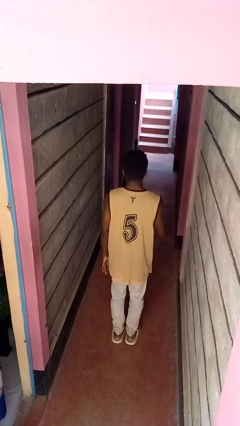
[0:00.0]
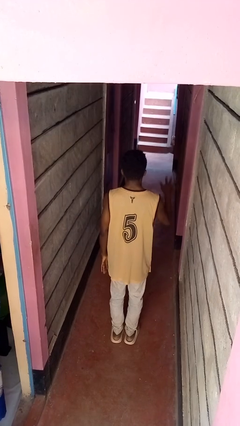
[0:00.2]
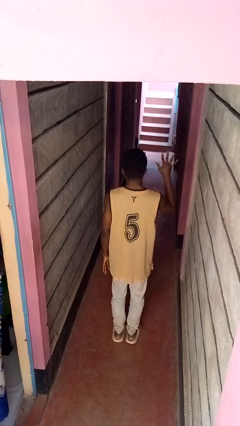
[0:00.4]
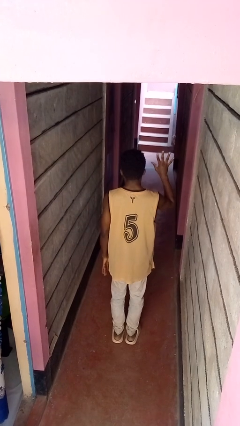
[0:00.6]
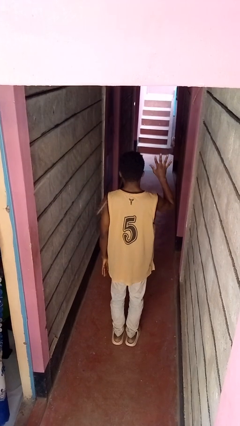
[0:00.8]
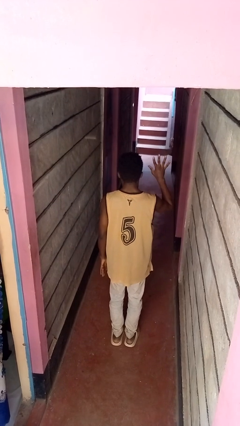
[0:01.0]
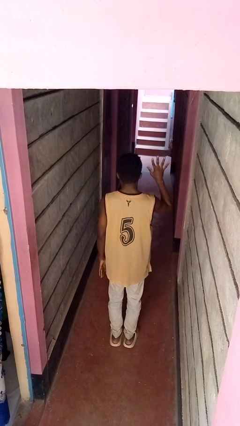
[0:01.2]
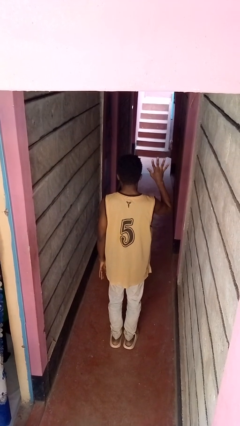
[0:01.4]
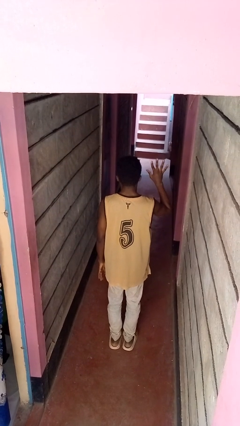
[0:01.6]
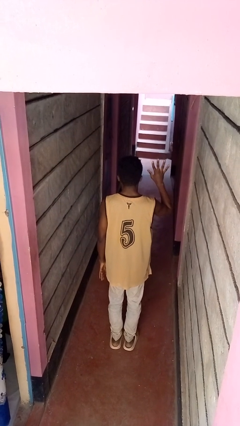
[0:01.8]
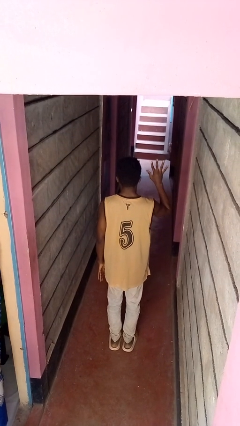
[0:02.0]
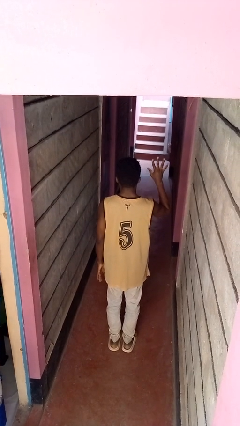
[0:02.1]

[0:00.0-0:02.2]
person gestures number five

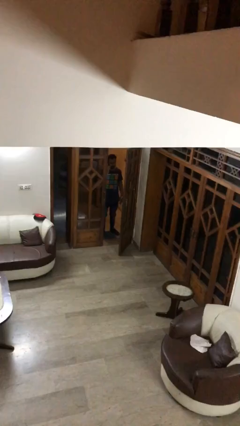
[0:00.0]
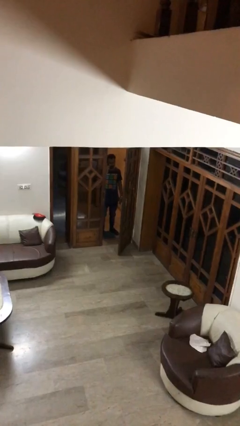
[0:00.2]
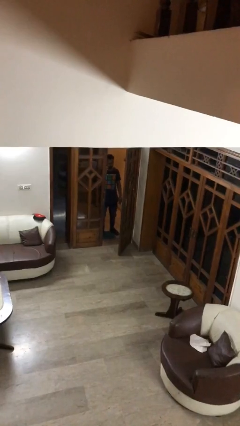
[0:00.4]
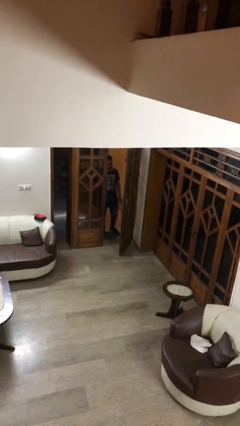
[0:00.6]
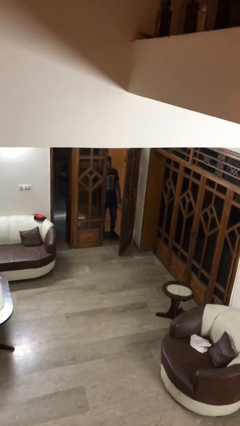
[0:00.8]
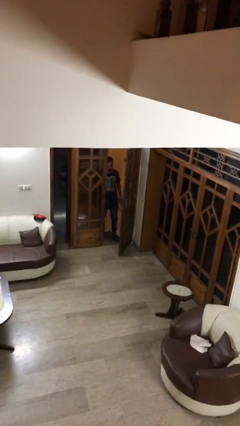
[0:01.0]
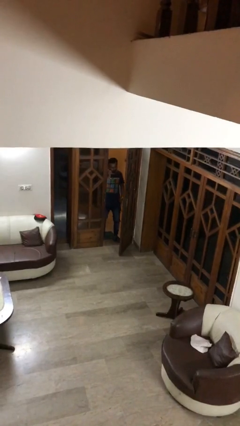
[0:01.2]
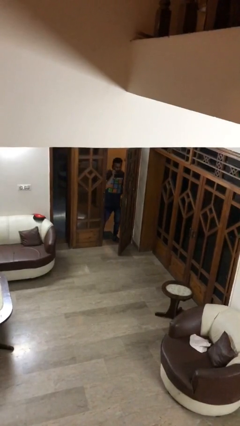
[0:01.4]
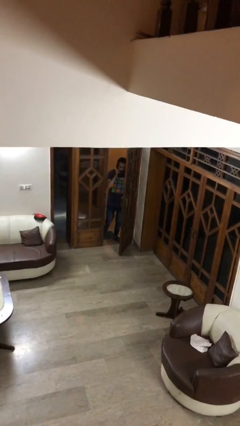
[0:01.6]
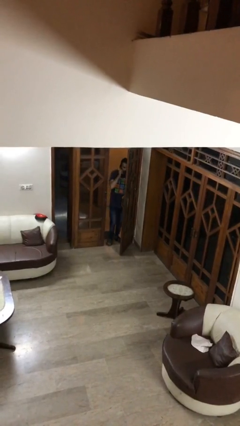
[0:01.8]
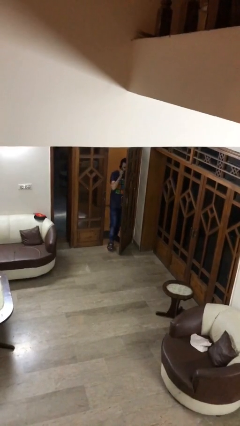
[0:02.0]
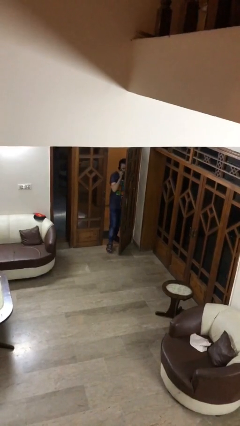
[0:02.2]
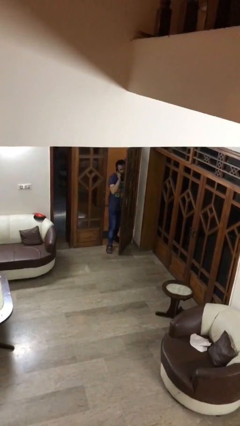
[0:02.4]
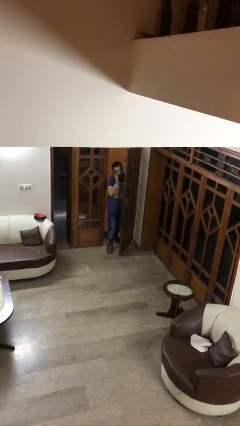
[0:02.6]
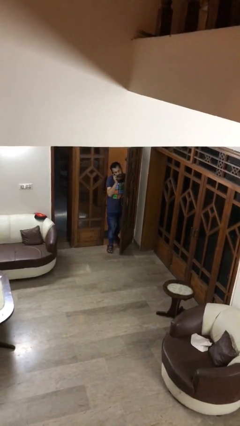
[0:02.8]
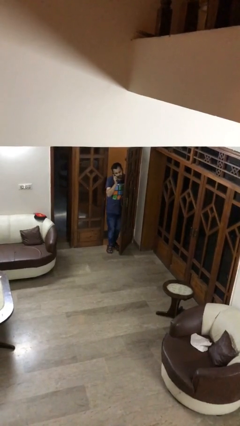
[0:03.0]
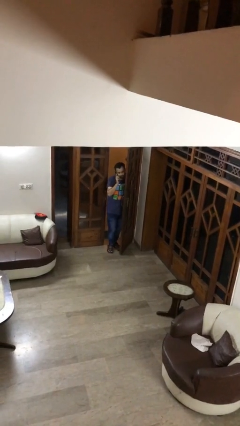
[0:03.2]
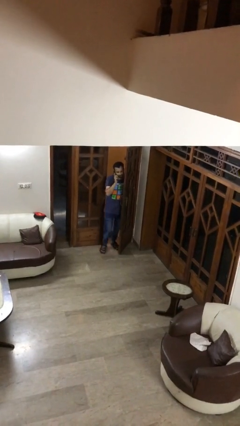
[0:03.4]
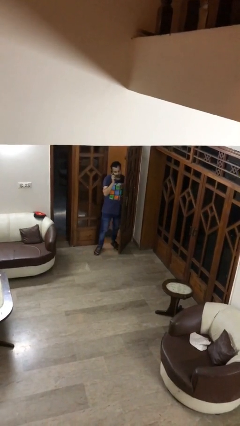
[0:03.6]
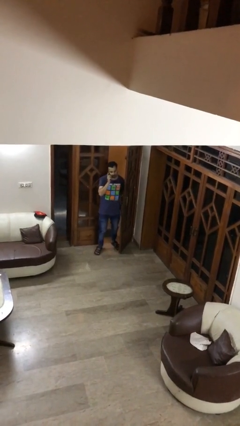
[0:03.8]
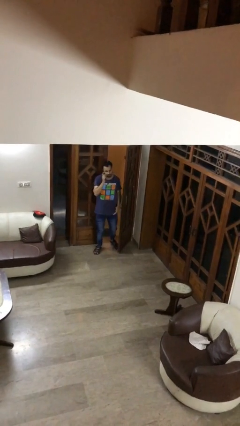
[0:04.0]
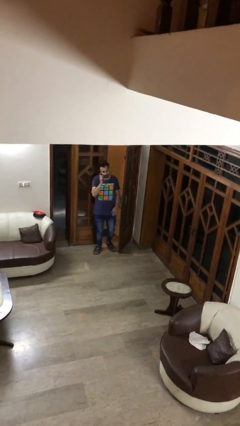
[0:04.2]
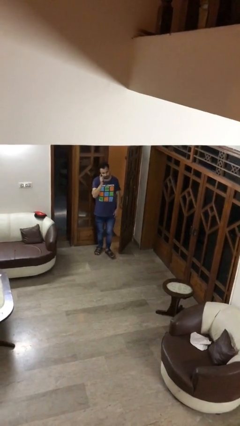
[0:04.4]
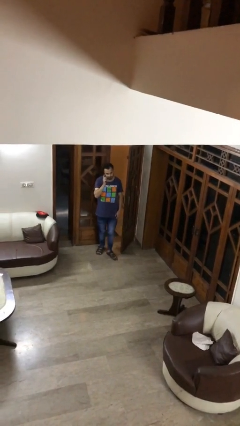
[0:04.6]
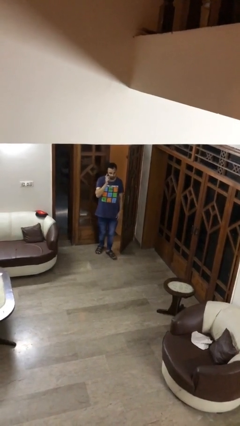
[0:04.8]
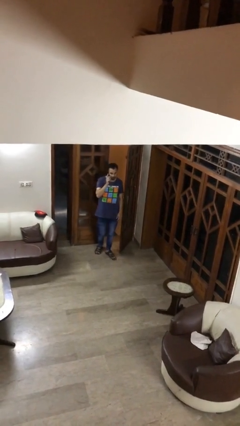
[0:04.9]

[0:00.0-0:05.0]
person enters scene through structure

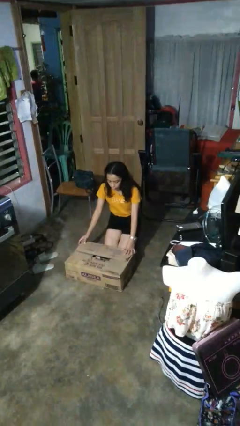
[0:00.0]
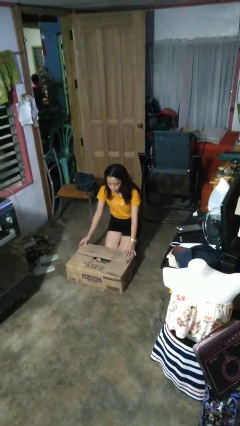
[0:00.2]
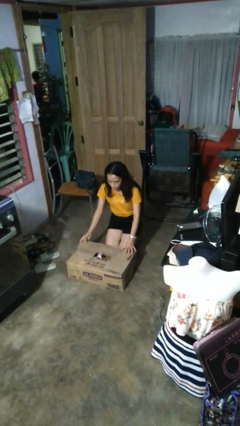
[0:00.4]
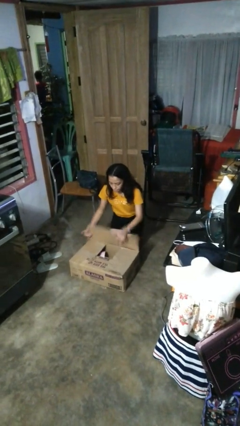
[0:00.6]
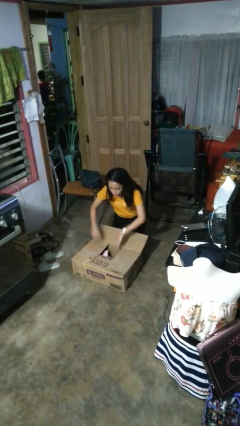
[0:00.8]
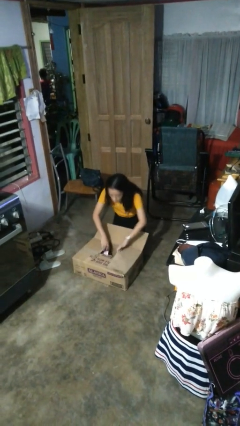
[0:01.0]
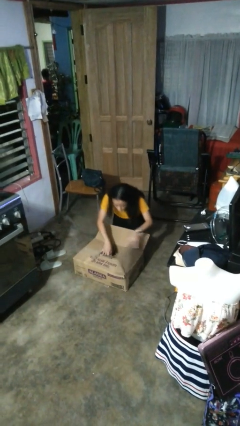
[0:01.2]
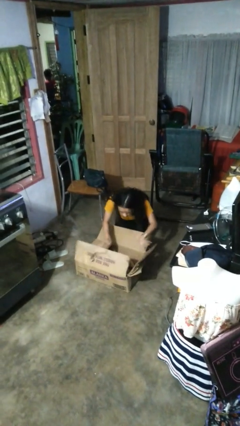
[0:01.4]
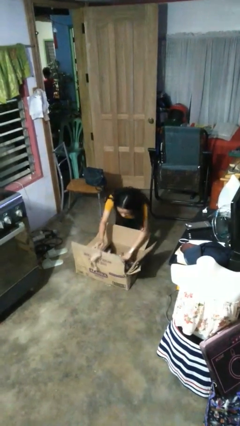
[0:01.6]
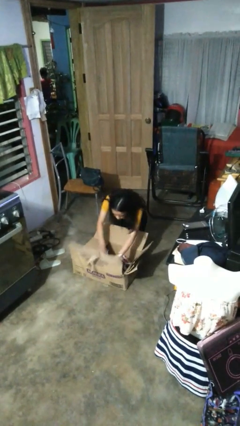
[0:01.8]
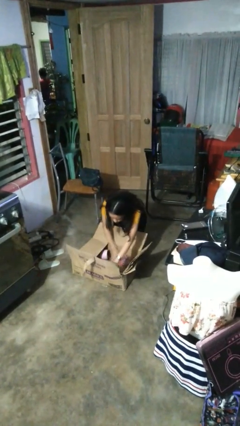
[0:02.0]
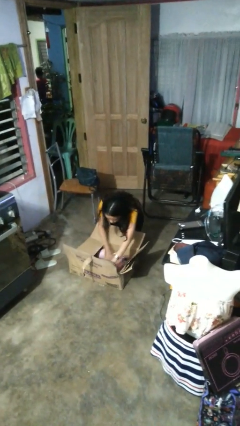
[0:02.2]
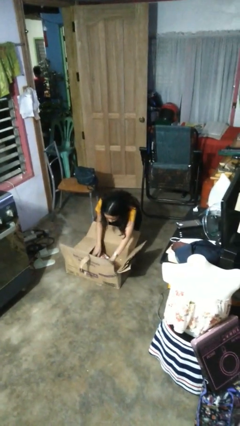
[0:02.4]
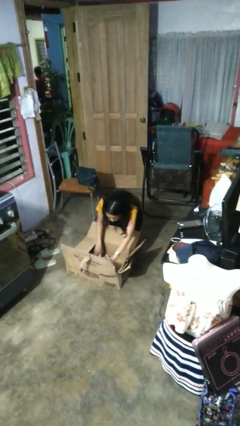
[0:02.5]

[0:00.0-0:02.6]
person searches in box

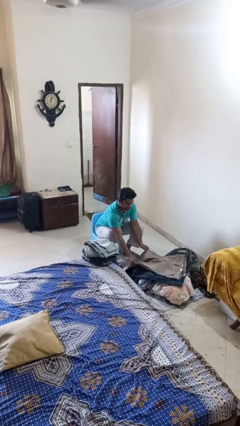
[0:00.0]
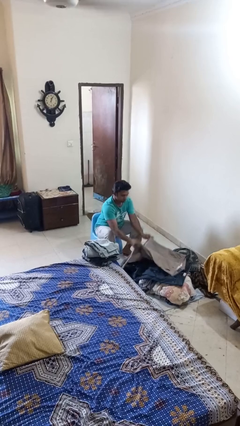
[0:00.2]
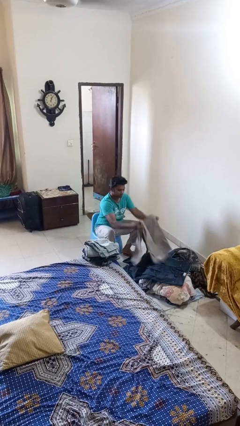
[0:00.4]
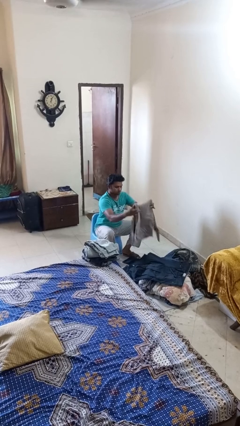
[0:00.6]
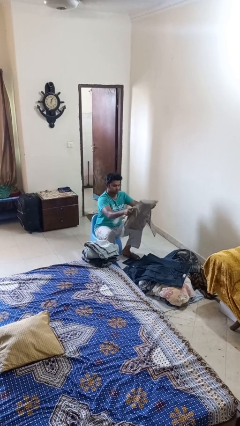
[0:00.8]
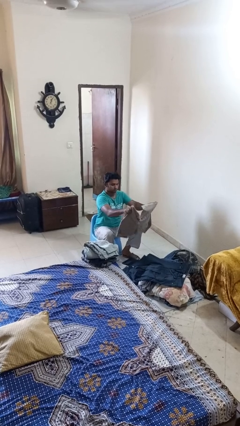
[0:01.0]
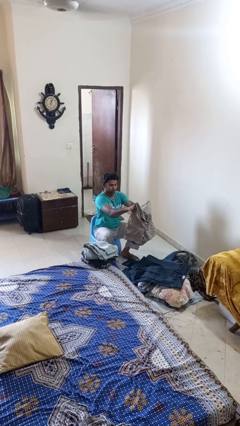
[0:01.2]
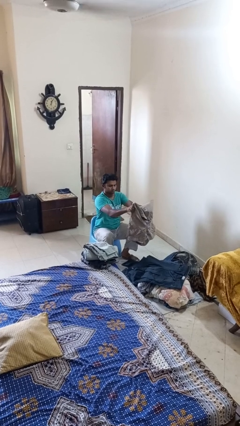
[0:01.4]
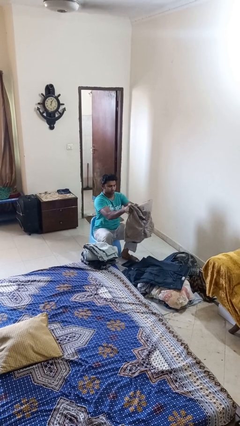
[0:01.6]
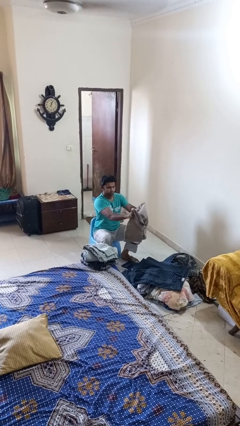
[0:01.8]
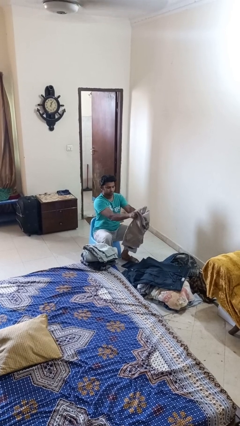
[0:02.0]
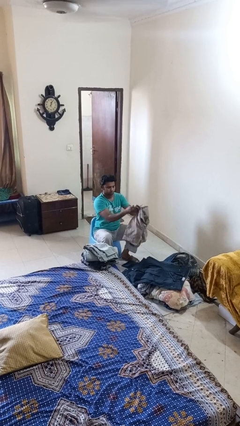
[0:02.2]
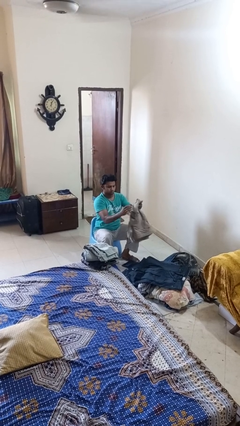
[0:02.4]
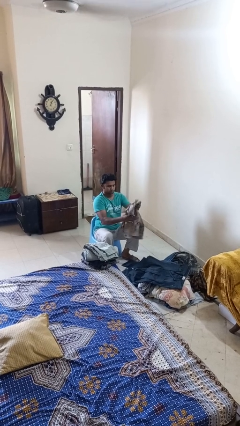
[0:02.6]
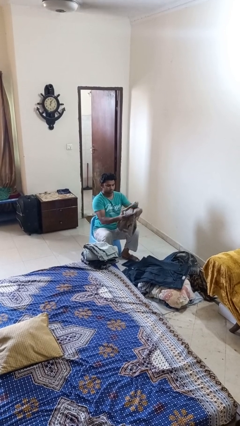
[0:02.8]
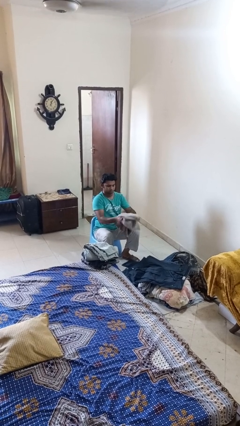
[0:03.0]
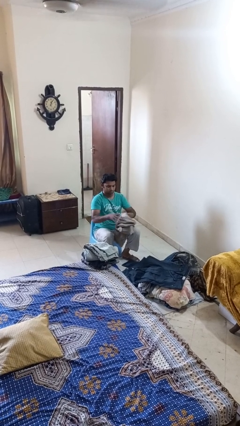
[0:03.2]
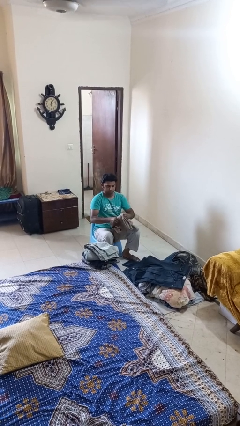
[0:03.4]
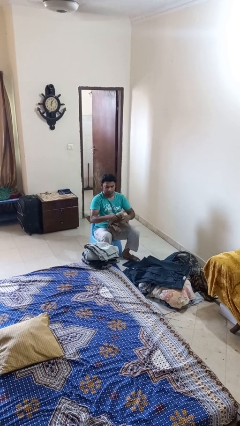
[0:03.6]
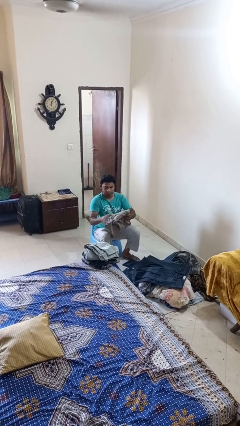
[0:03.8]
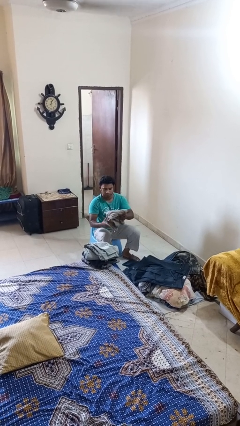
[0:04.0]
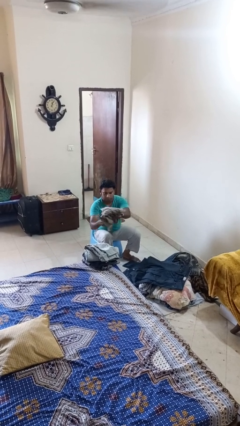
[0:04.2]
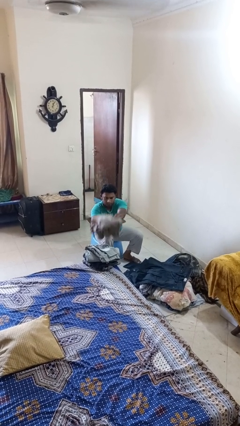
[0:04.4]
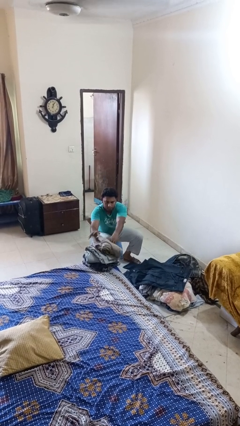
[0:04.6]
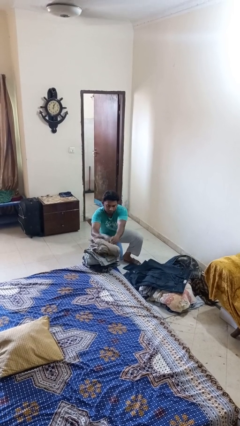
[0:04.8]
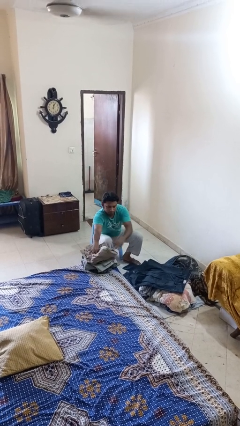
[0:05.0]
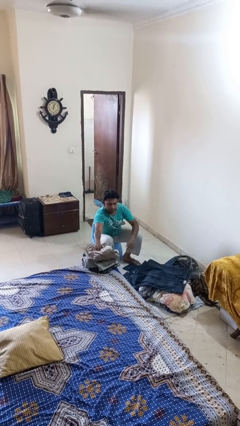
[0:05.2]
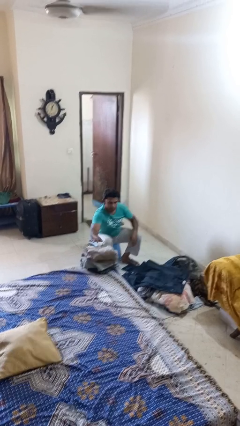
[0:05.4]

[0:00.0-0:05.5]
person folds pants

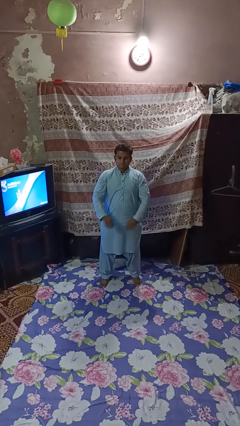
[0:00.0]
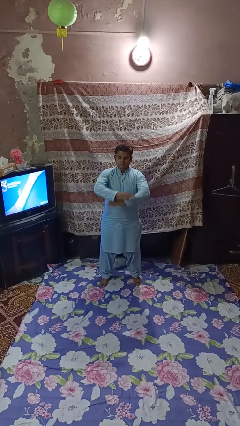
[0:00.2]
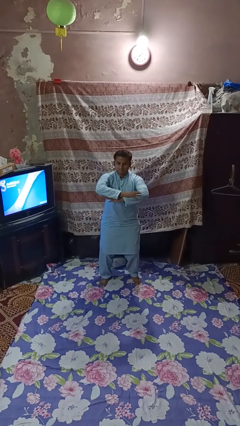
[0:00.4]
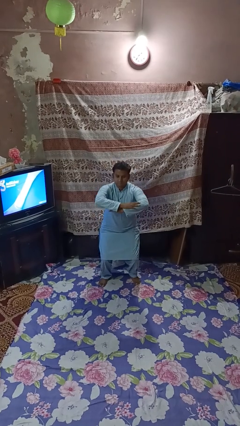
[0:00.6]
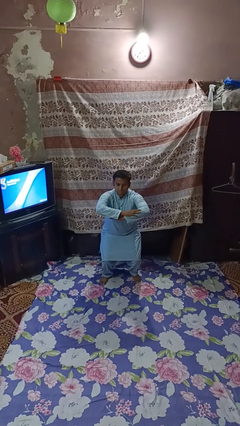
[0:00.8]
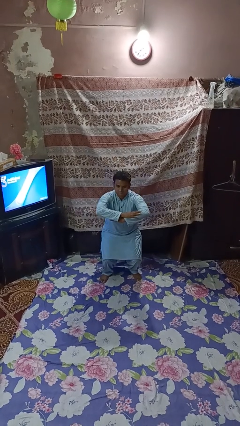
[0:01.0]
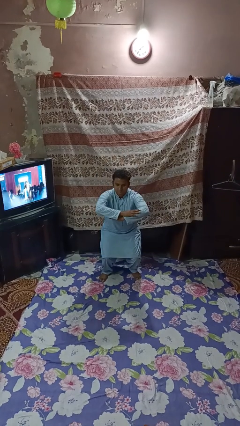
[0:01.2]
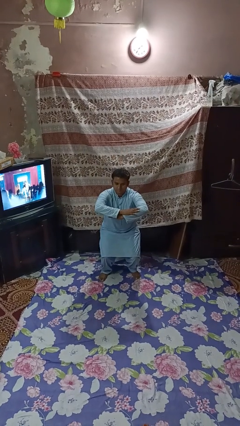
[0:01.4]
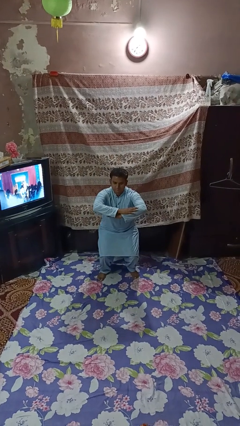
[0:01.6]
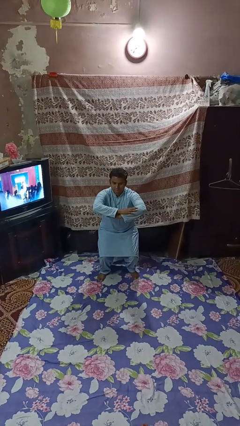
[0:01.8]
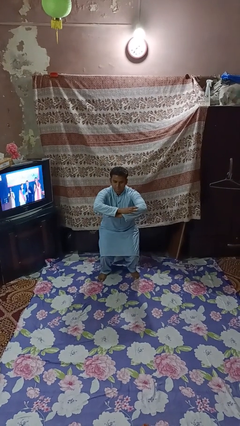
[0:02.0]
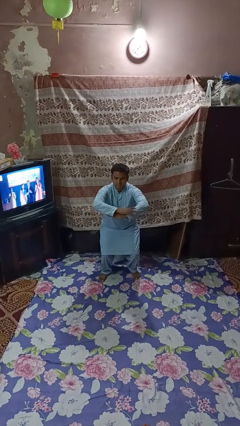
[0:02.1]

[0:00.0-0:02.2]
person squats
